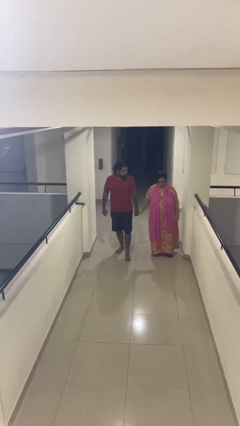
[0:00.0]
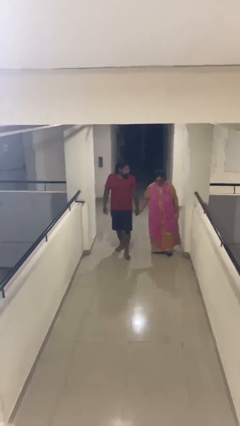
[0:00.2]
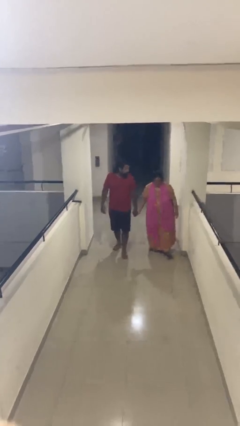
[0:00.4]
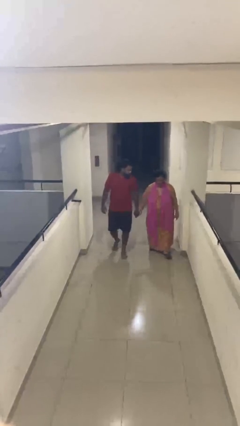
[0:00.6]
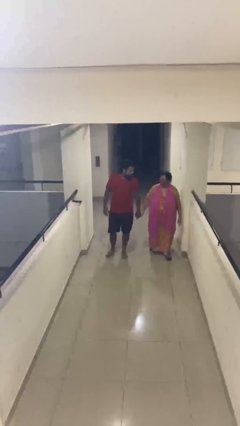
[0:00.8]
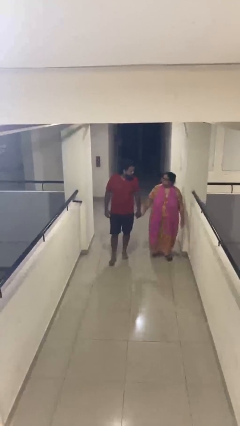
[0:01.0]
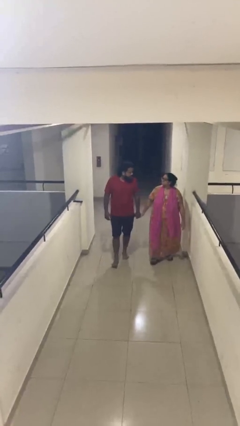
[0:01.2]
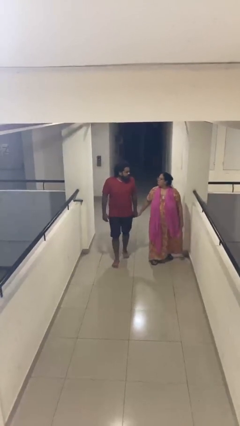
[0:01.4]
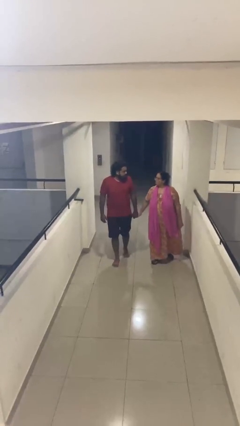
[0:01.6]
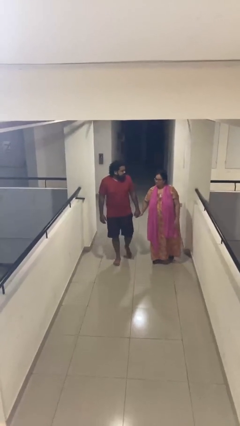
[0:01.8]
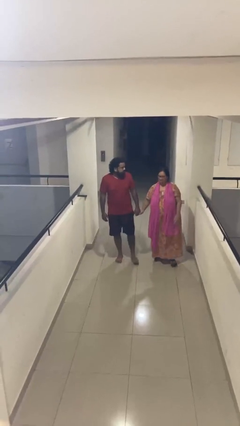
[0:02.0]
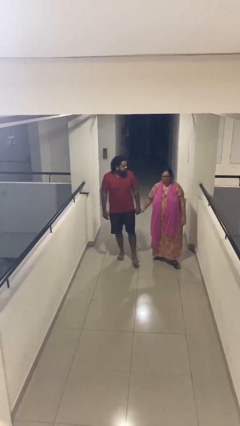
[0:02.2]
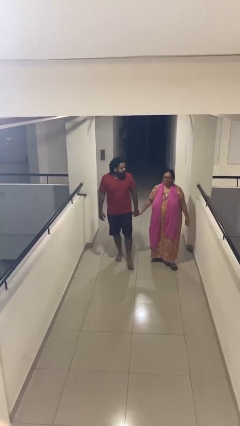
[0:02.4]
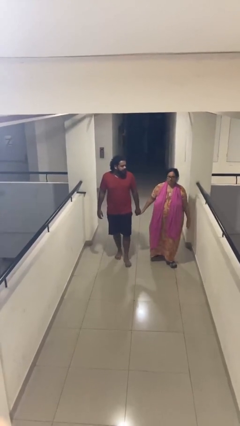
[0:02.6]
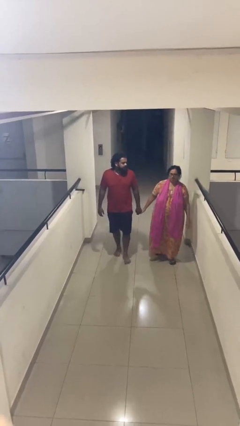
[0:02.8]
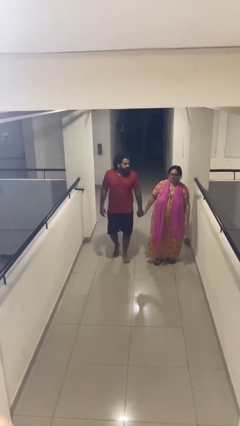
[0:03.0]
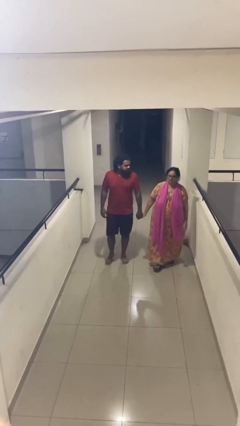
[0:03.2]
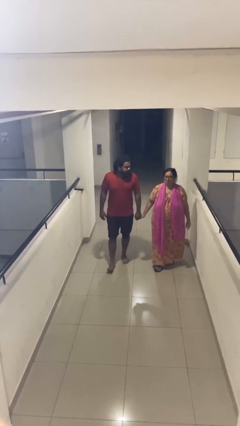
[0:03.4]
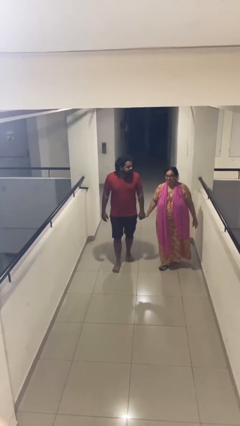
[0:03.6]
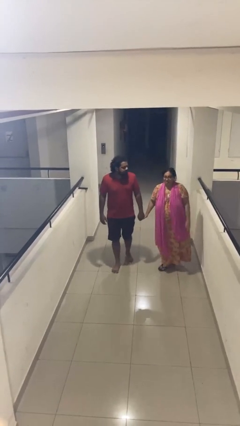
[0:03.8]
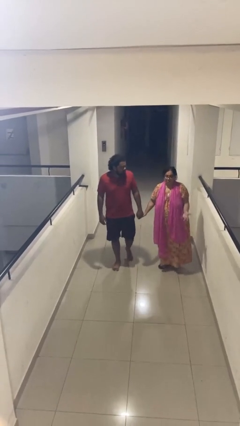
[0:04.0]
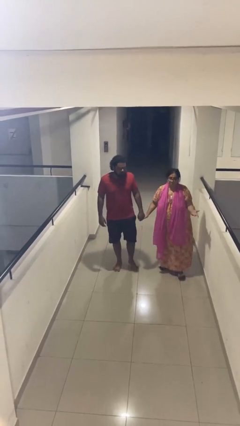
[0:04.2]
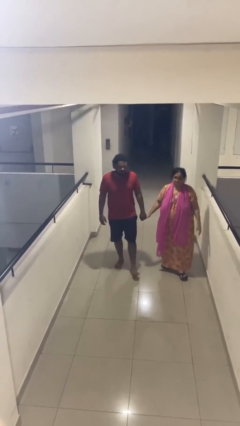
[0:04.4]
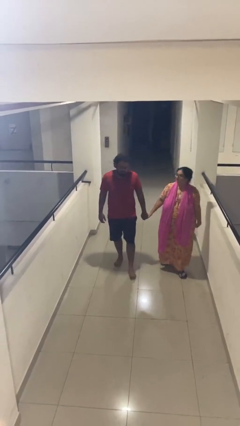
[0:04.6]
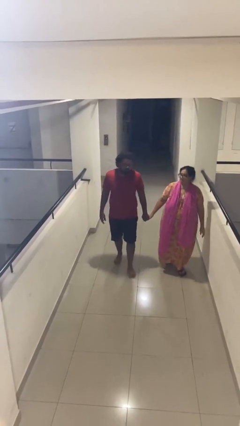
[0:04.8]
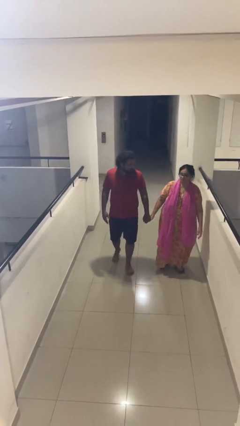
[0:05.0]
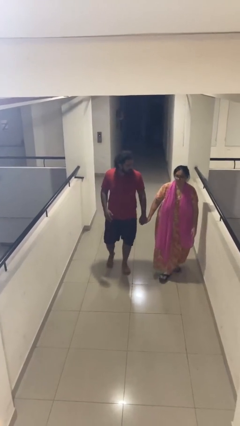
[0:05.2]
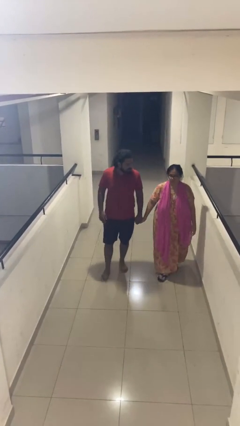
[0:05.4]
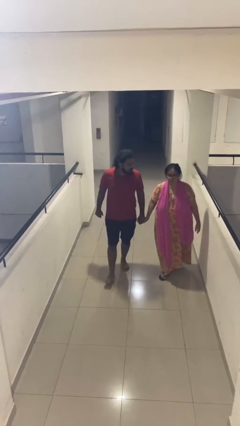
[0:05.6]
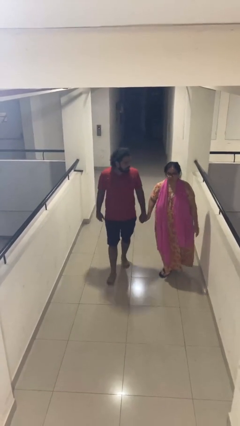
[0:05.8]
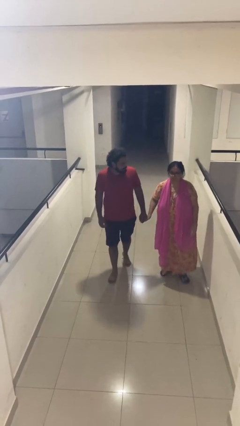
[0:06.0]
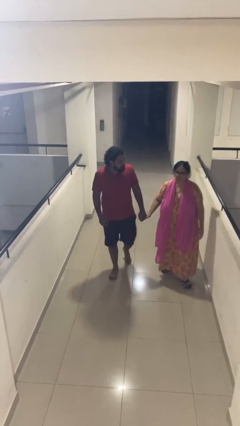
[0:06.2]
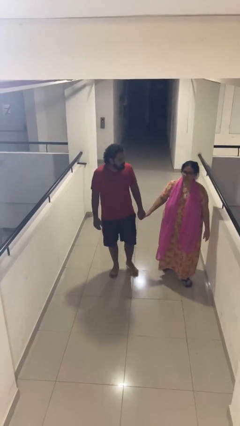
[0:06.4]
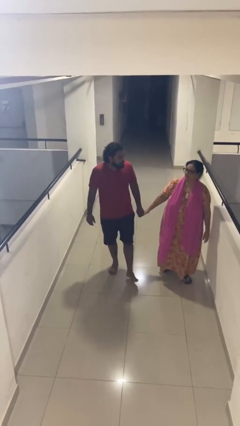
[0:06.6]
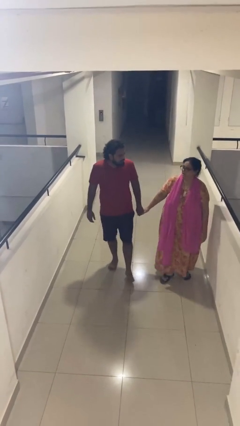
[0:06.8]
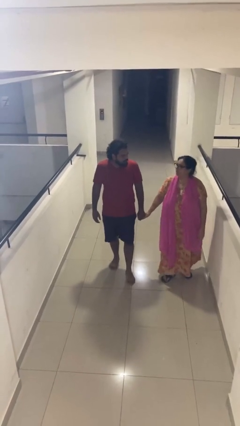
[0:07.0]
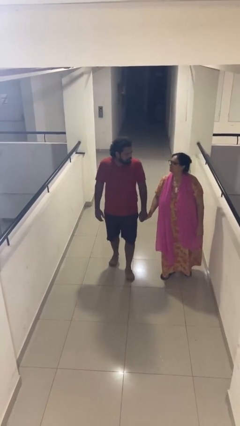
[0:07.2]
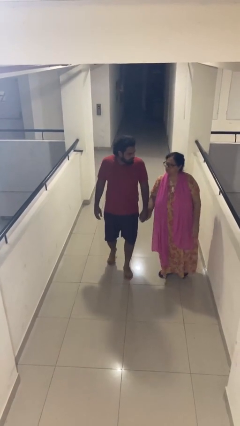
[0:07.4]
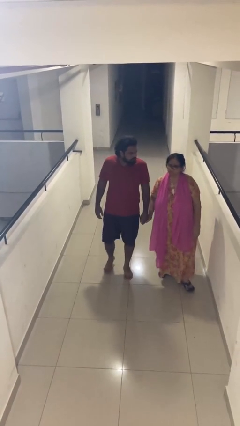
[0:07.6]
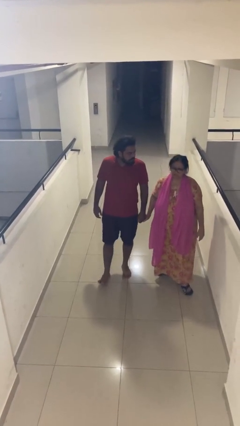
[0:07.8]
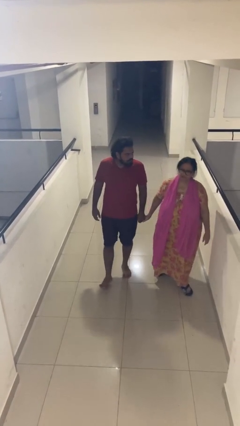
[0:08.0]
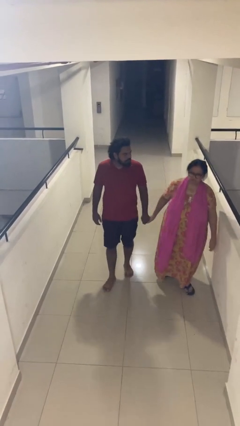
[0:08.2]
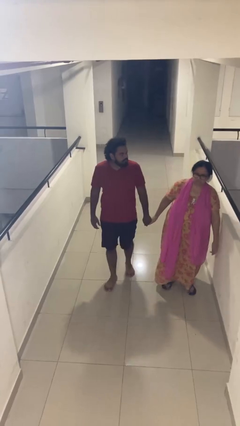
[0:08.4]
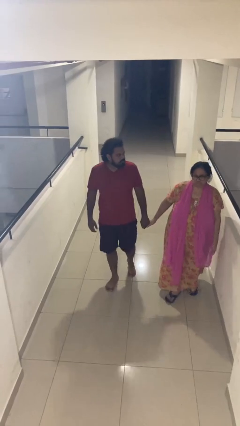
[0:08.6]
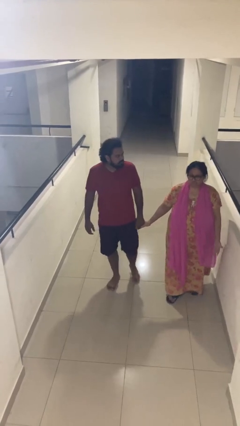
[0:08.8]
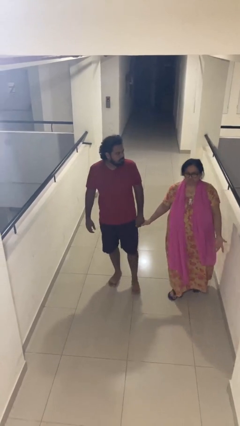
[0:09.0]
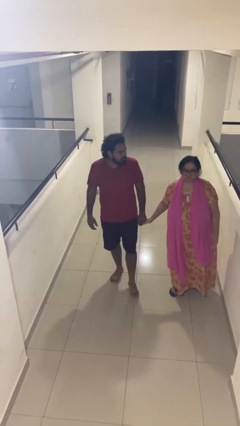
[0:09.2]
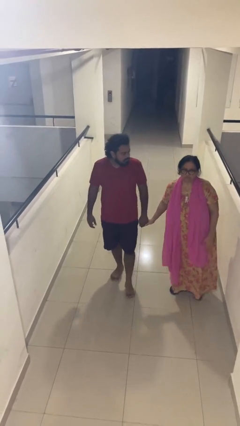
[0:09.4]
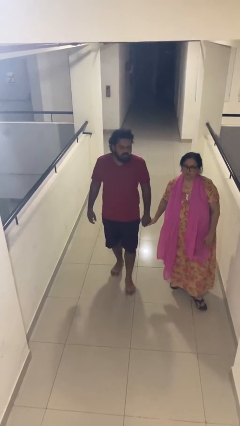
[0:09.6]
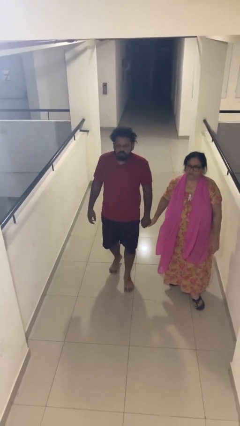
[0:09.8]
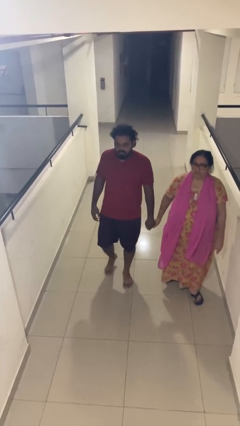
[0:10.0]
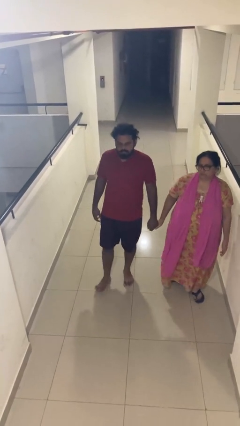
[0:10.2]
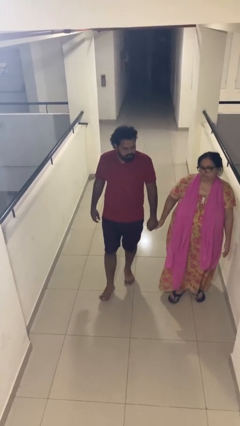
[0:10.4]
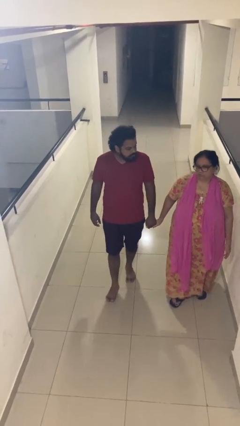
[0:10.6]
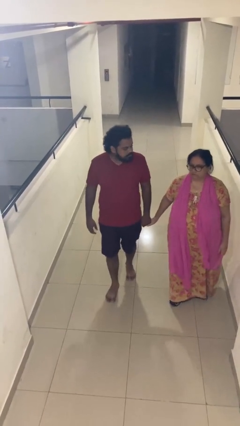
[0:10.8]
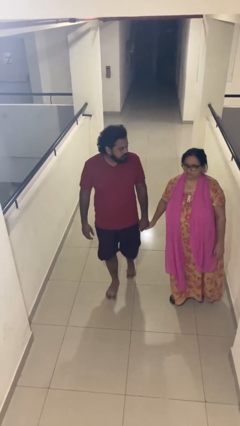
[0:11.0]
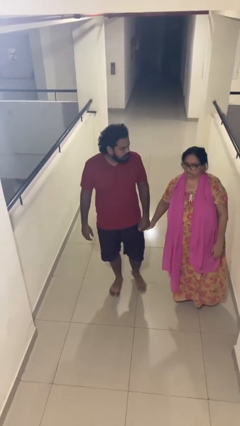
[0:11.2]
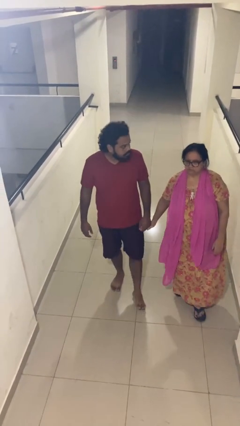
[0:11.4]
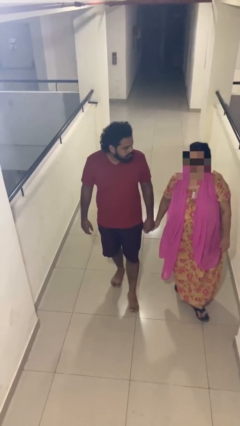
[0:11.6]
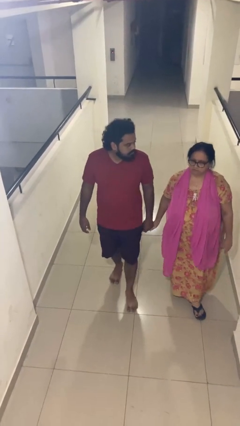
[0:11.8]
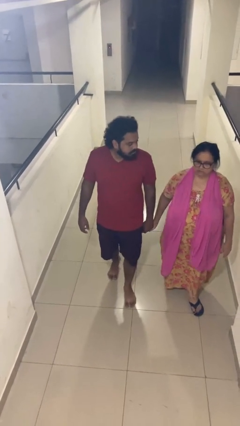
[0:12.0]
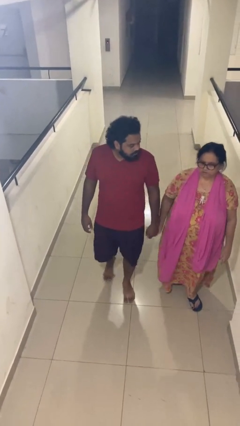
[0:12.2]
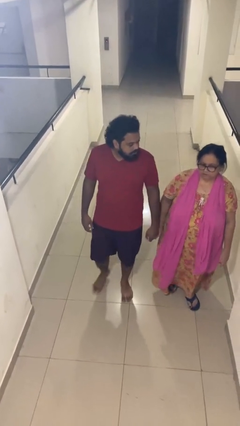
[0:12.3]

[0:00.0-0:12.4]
person holds hand

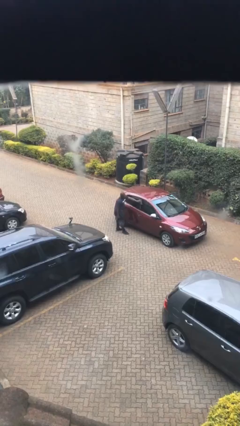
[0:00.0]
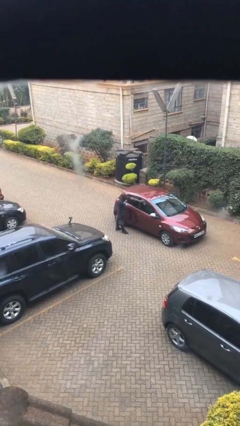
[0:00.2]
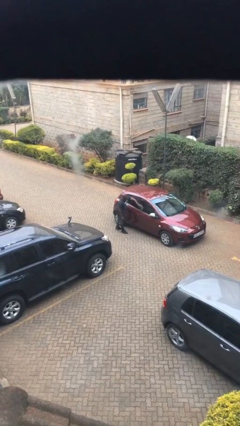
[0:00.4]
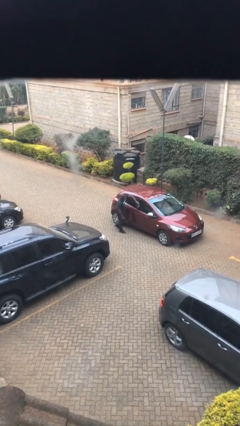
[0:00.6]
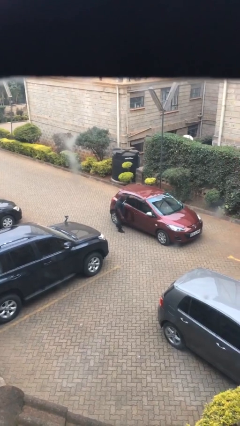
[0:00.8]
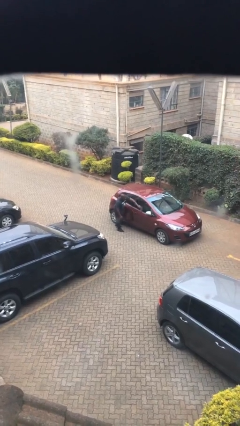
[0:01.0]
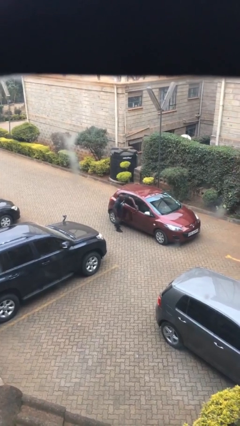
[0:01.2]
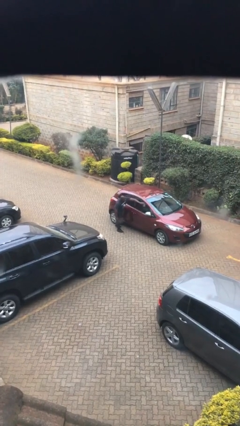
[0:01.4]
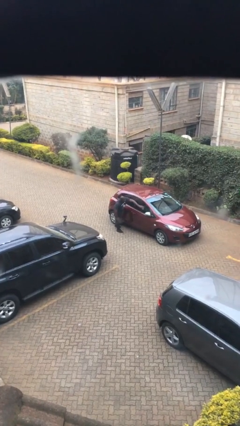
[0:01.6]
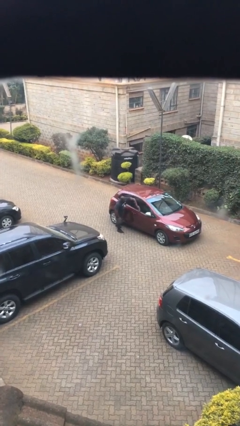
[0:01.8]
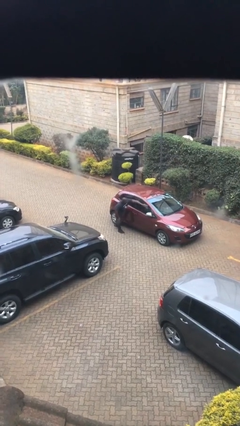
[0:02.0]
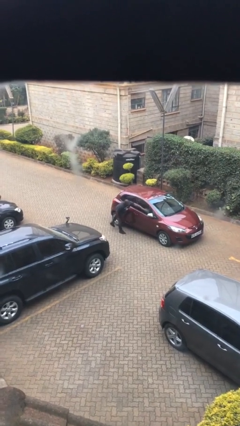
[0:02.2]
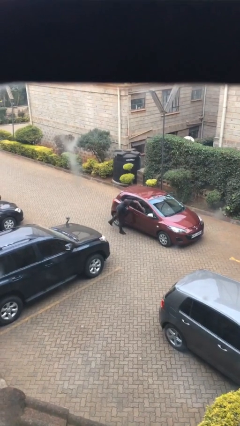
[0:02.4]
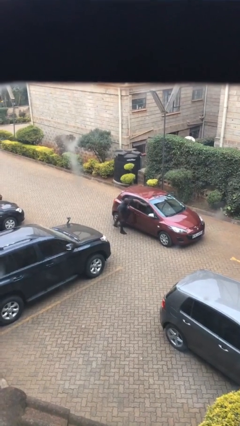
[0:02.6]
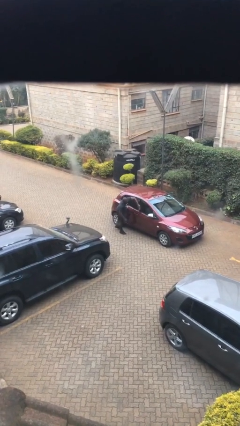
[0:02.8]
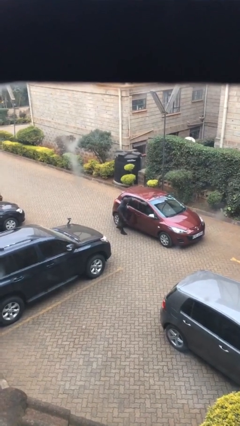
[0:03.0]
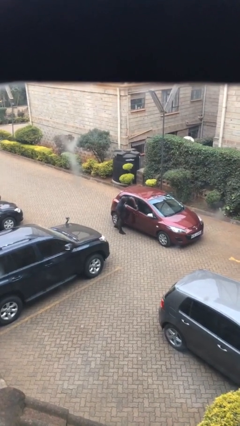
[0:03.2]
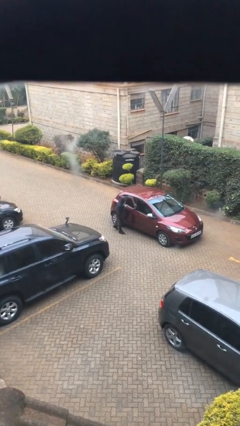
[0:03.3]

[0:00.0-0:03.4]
person polishes car with rag

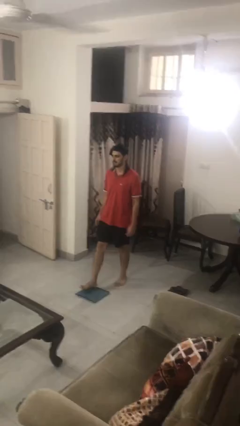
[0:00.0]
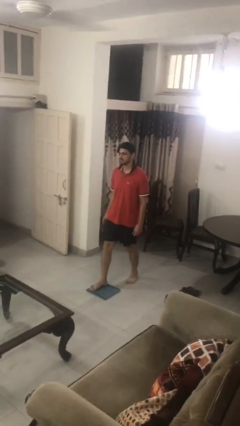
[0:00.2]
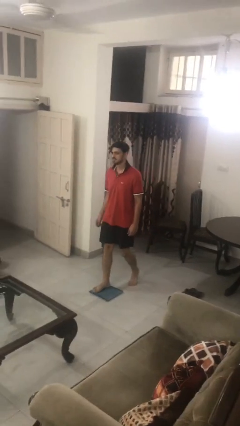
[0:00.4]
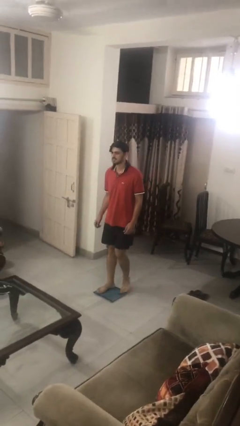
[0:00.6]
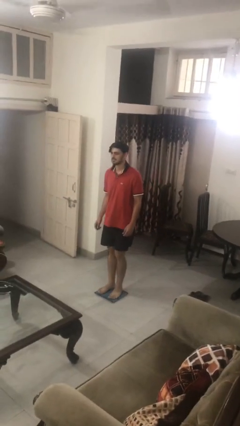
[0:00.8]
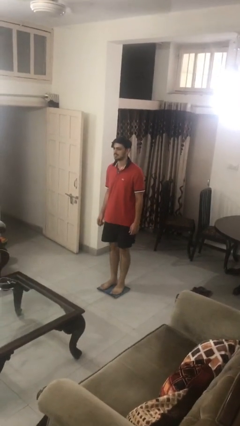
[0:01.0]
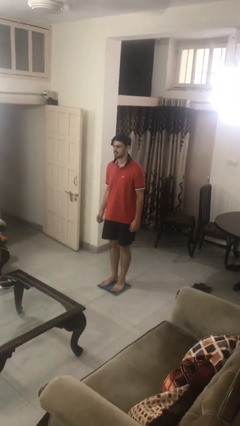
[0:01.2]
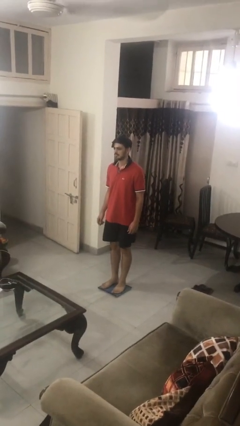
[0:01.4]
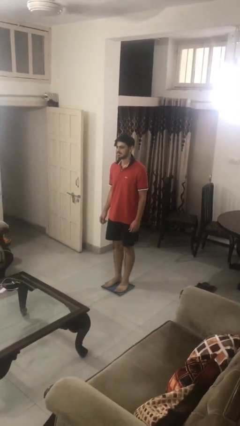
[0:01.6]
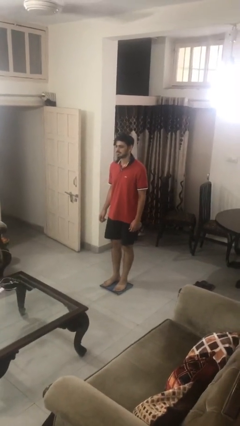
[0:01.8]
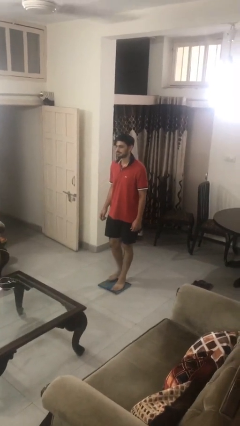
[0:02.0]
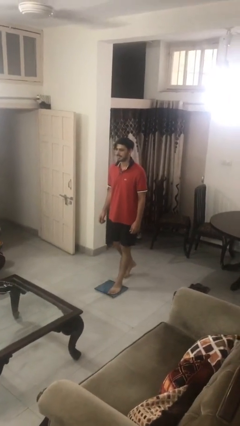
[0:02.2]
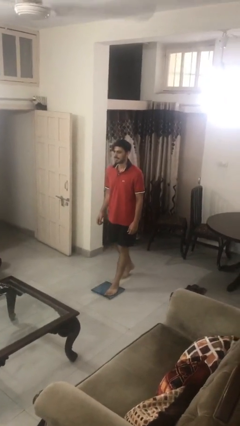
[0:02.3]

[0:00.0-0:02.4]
person uses bodyweight scale
